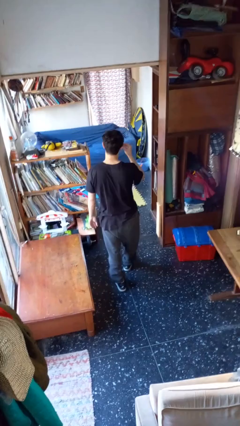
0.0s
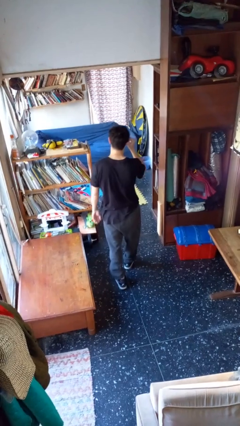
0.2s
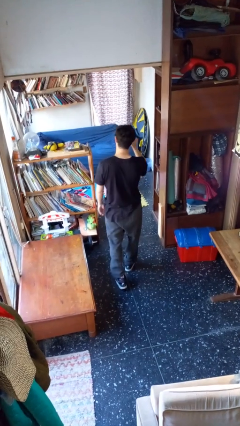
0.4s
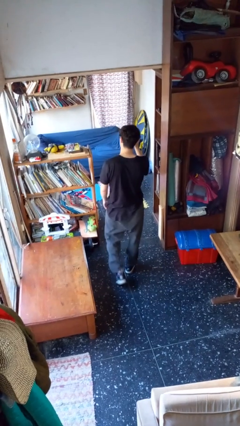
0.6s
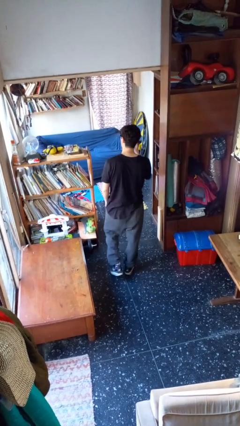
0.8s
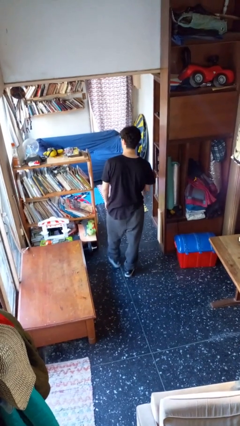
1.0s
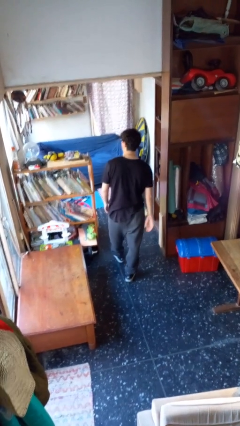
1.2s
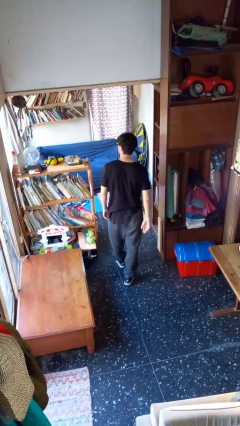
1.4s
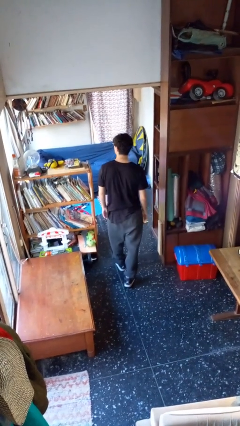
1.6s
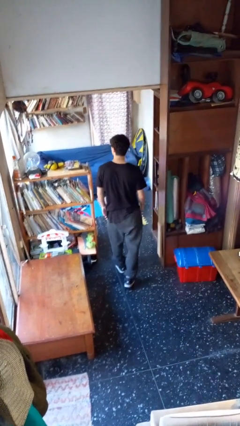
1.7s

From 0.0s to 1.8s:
person puts on glasses

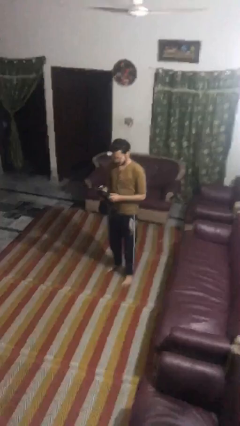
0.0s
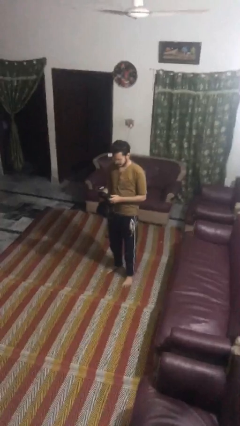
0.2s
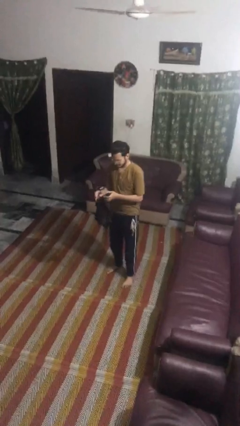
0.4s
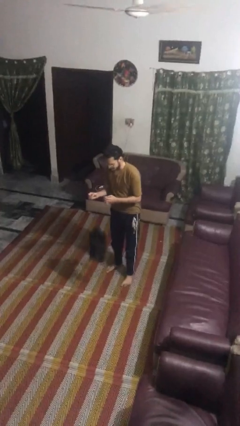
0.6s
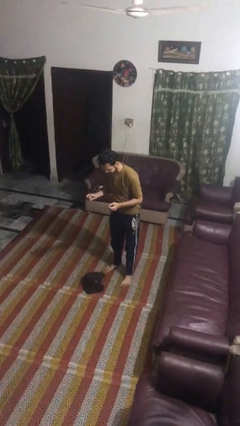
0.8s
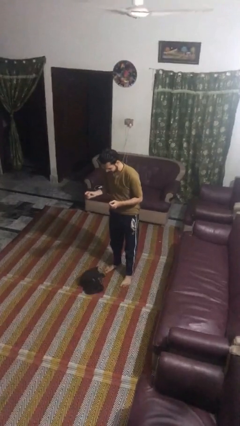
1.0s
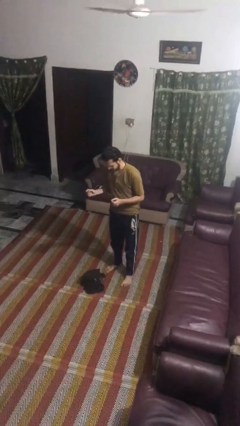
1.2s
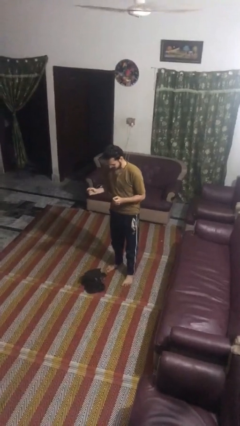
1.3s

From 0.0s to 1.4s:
person drops object

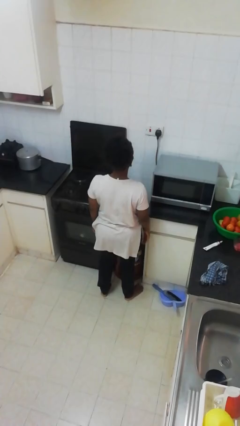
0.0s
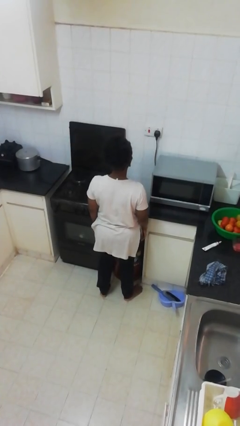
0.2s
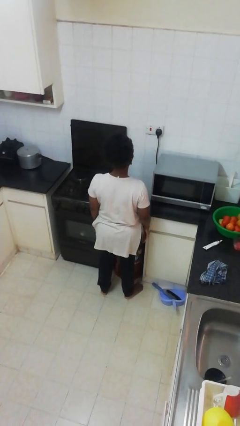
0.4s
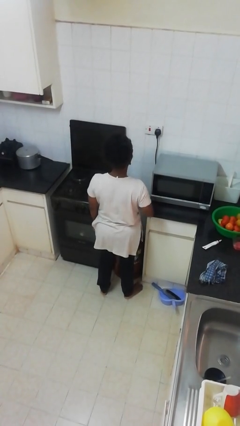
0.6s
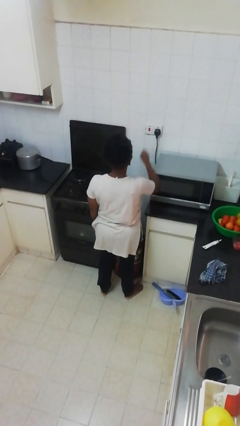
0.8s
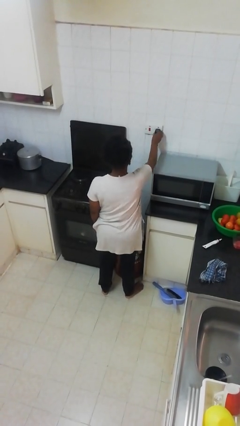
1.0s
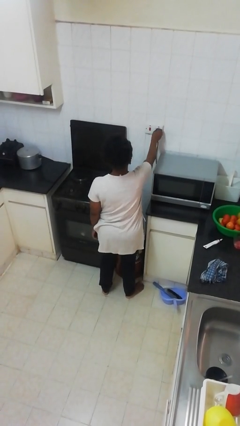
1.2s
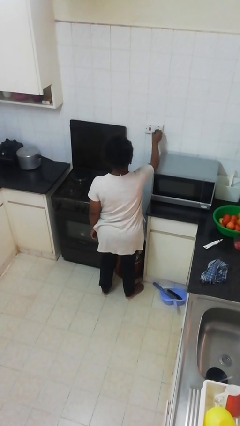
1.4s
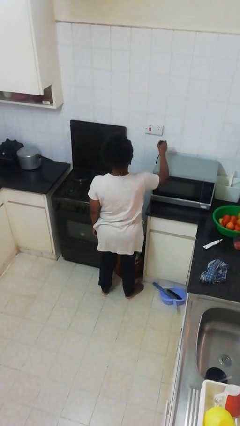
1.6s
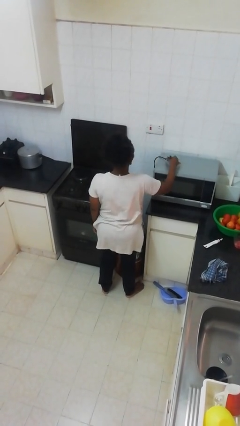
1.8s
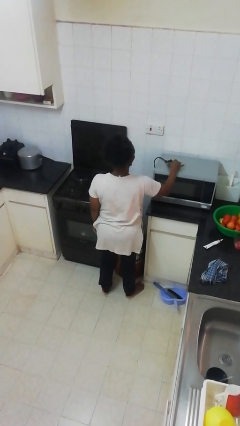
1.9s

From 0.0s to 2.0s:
person unplugs from electrical socket

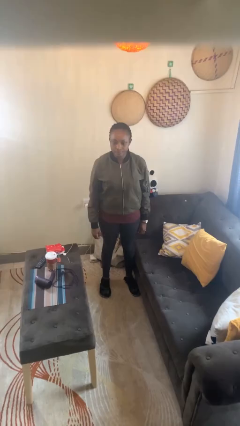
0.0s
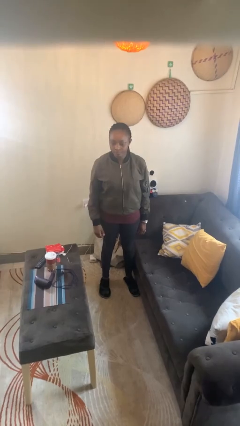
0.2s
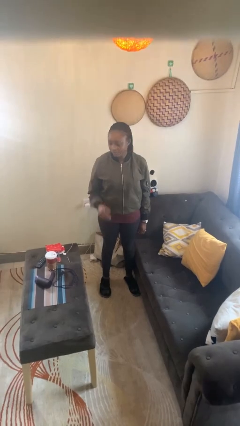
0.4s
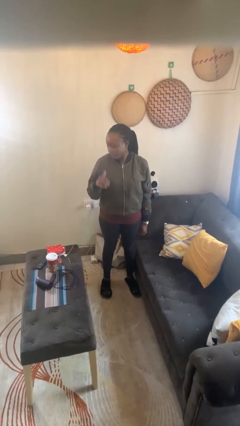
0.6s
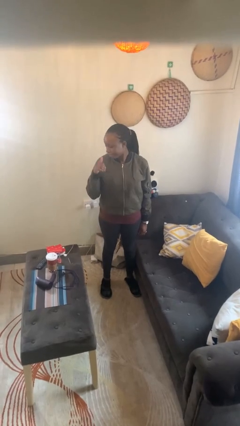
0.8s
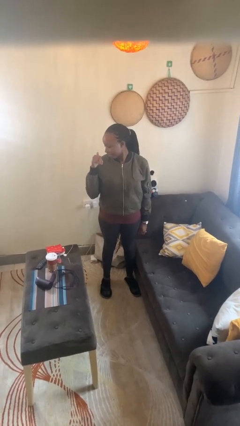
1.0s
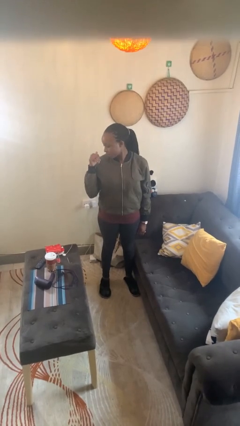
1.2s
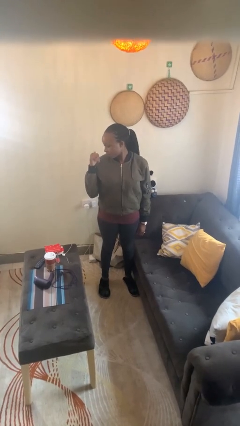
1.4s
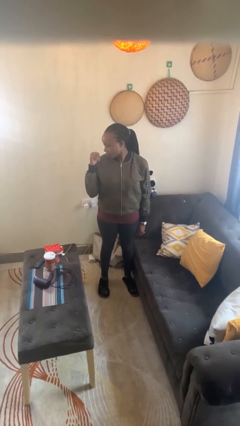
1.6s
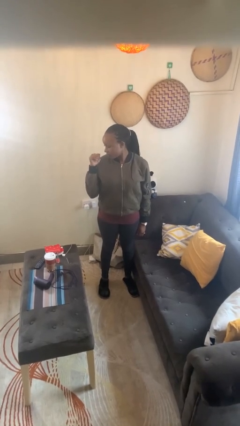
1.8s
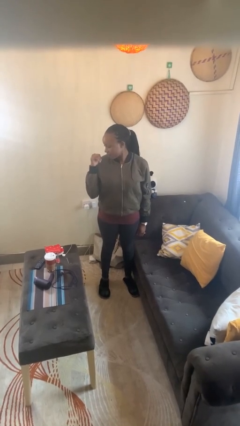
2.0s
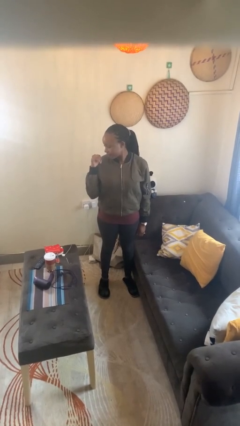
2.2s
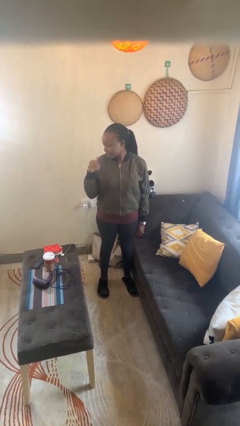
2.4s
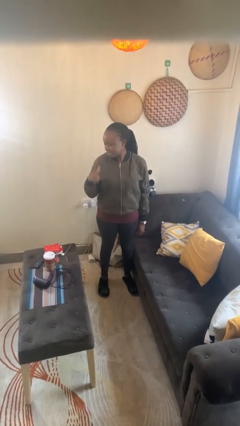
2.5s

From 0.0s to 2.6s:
person gestures behind me

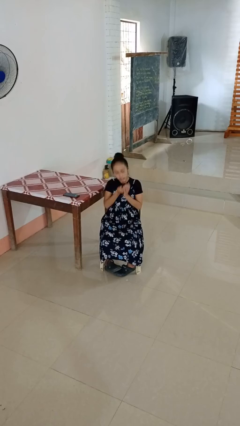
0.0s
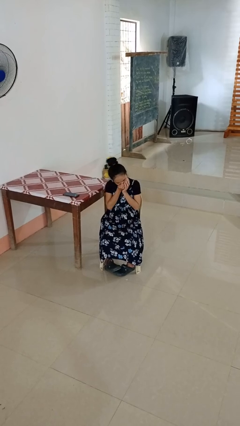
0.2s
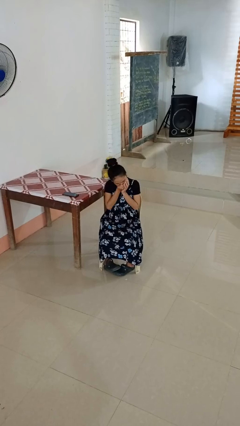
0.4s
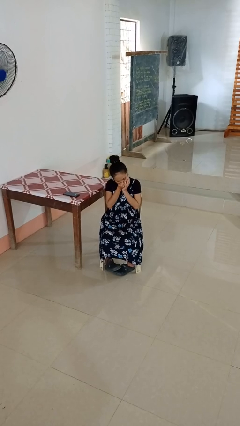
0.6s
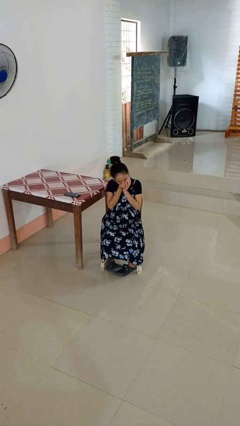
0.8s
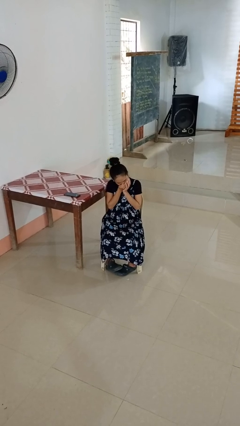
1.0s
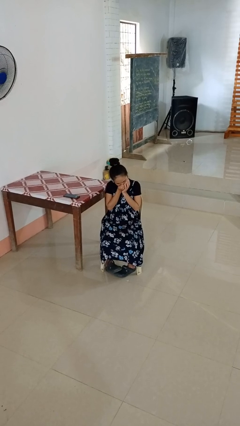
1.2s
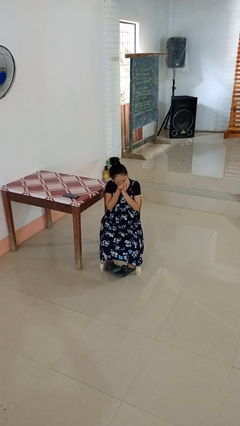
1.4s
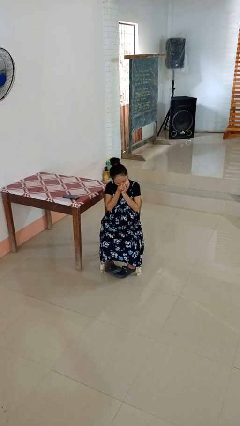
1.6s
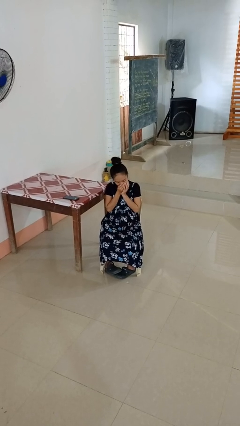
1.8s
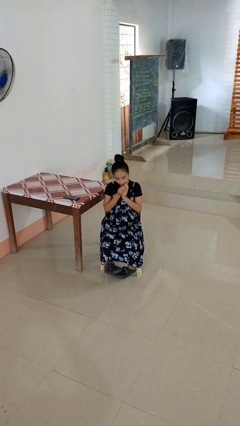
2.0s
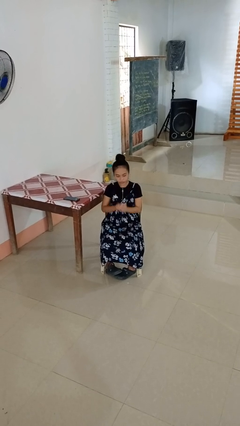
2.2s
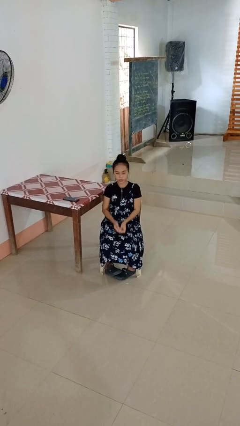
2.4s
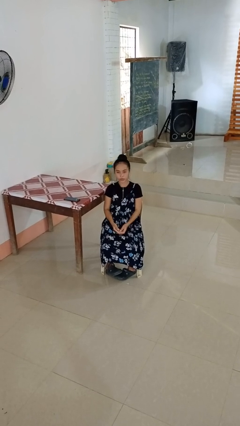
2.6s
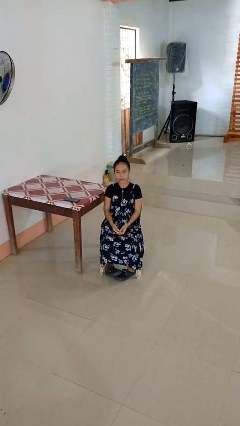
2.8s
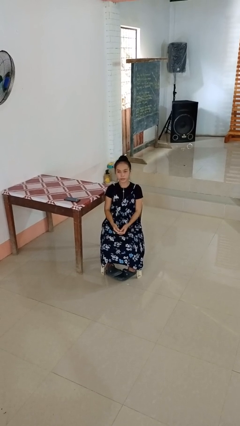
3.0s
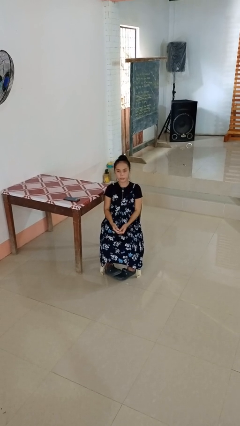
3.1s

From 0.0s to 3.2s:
person sneezes into hand

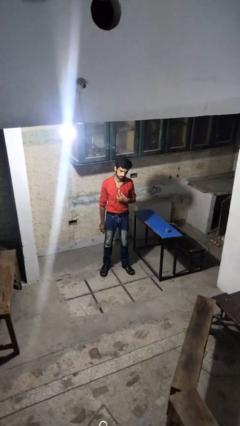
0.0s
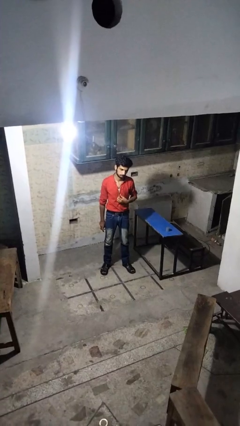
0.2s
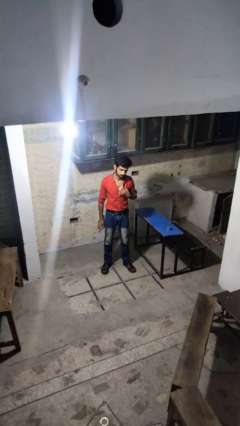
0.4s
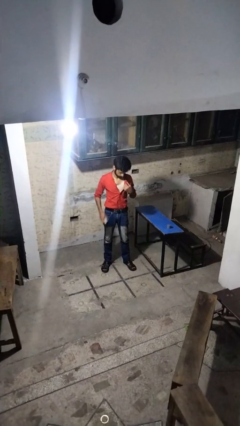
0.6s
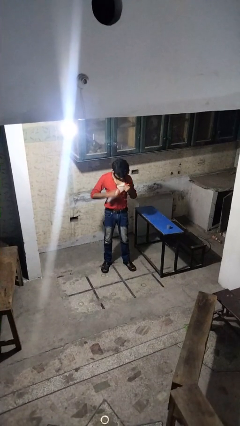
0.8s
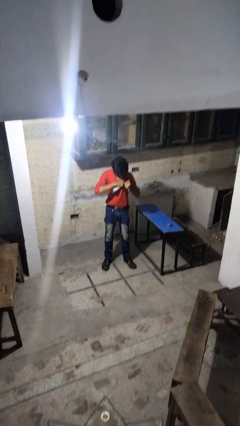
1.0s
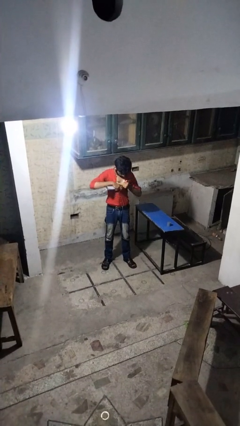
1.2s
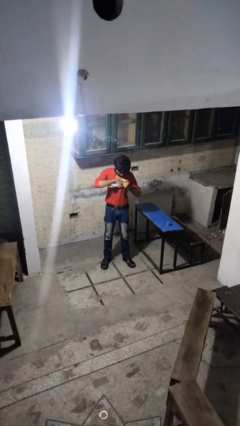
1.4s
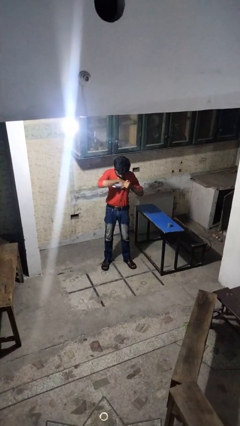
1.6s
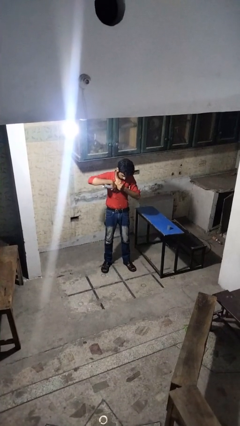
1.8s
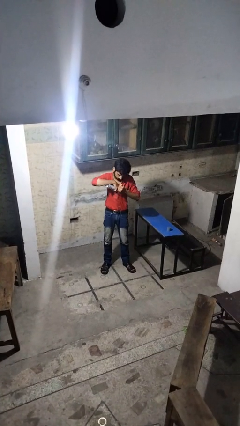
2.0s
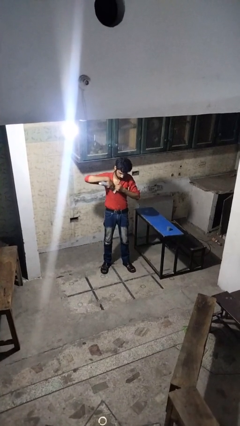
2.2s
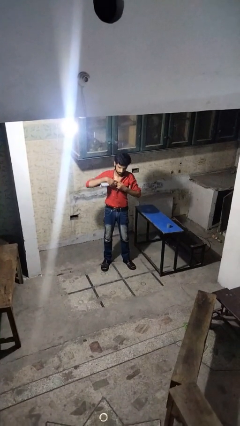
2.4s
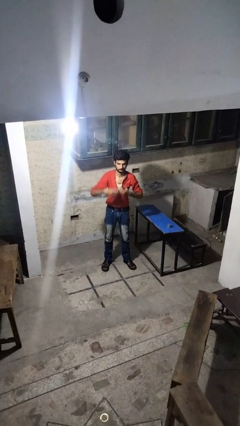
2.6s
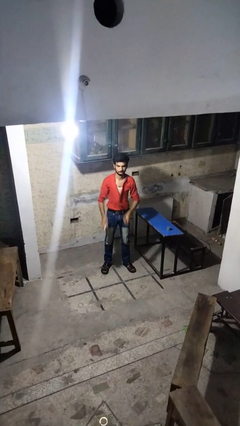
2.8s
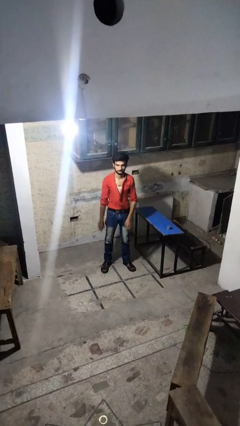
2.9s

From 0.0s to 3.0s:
person applies deodorant

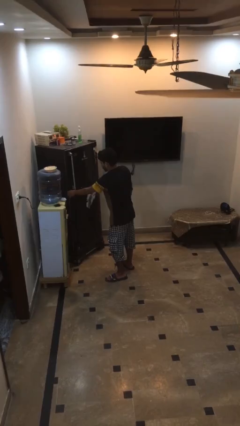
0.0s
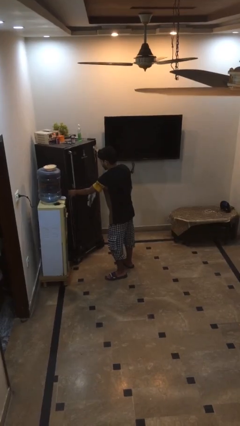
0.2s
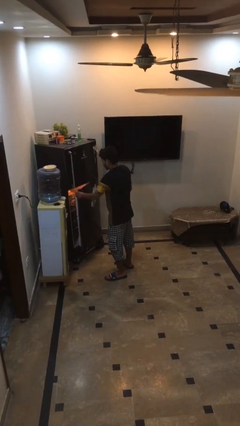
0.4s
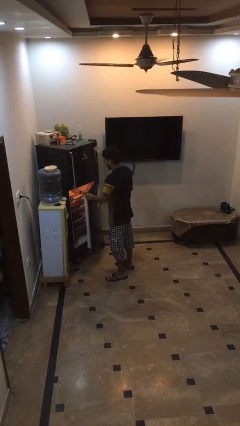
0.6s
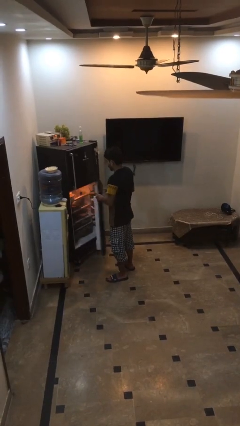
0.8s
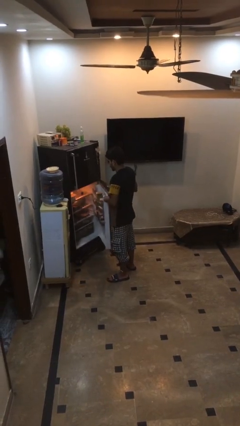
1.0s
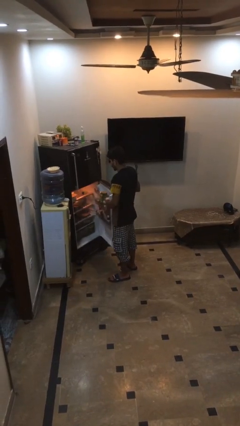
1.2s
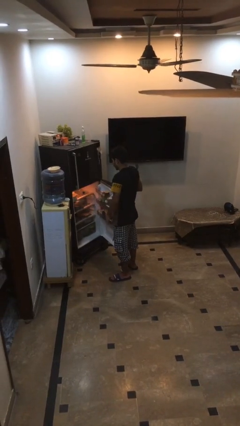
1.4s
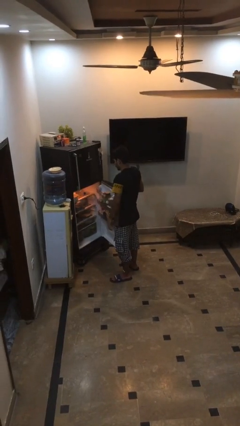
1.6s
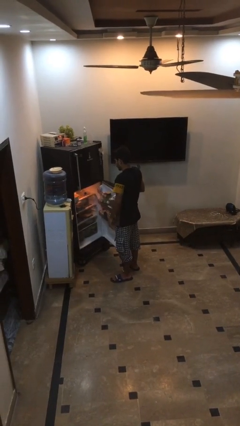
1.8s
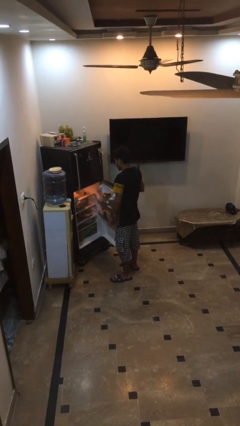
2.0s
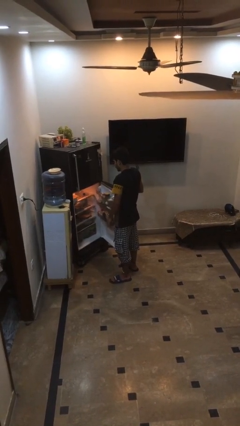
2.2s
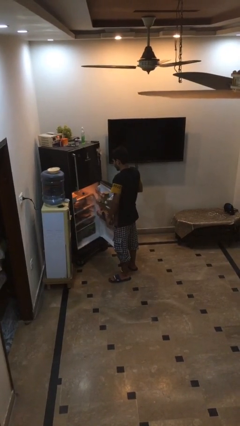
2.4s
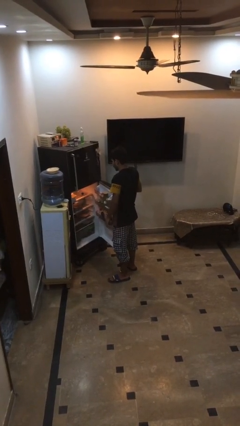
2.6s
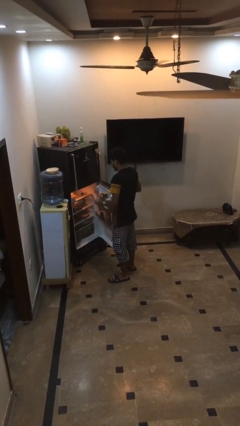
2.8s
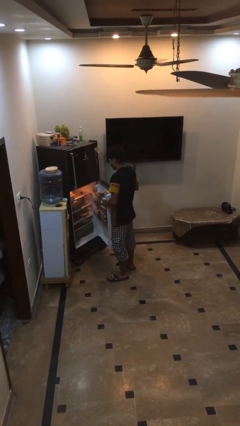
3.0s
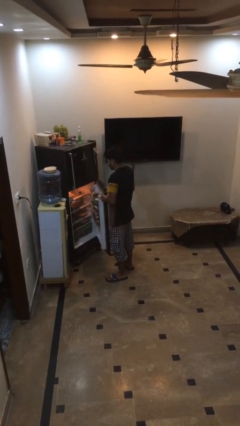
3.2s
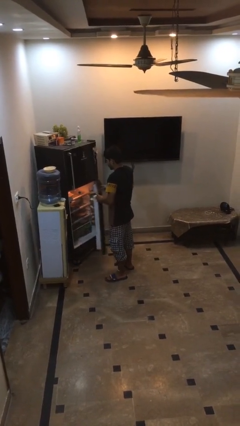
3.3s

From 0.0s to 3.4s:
person opens refrigerator
